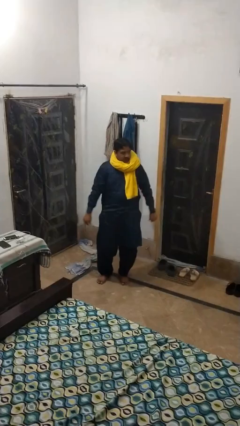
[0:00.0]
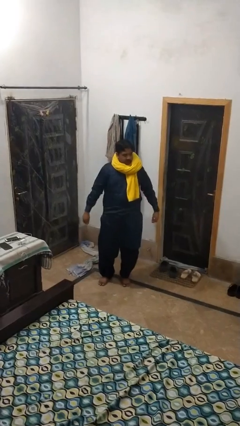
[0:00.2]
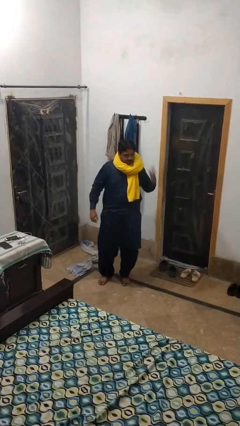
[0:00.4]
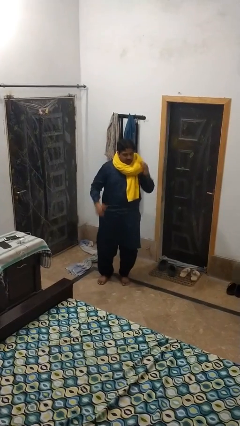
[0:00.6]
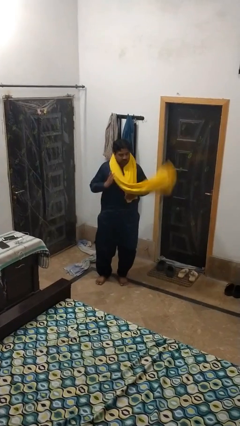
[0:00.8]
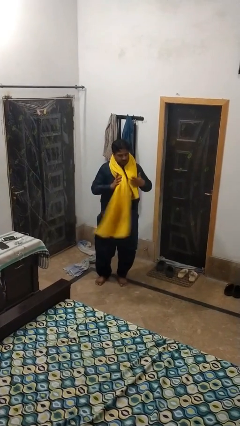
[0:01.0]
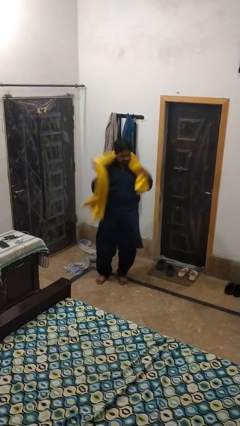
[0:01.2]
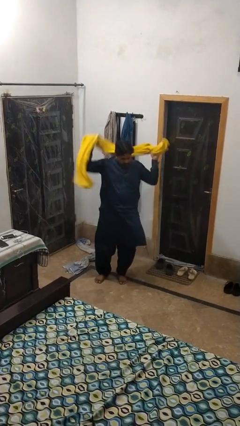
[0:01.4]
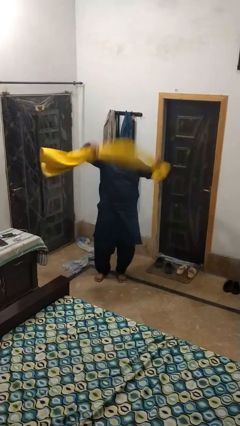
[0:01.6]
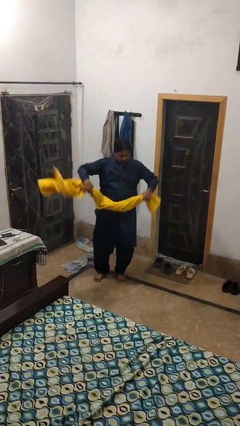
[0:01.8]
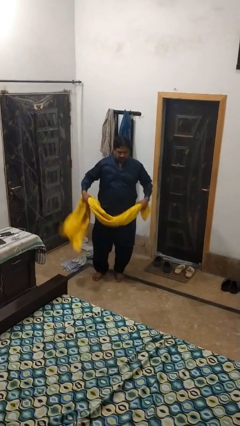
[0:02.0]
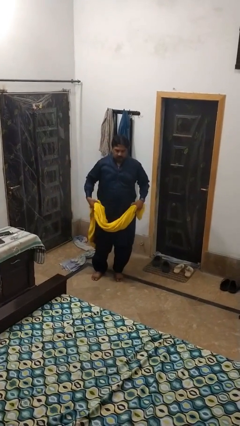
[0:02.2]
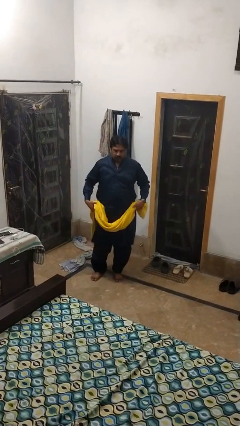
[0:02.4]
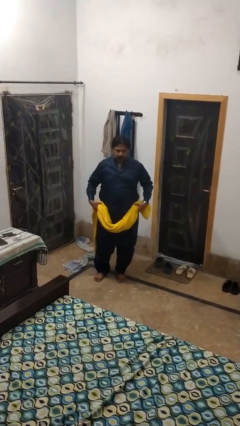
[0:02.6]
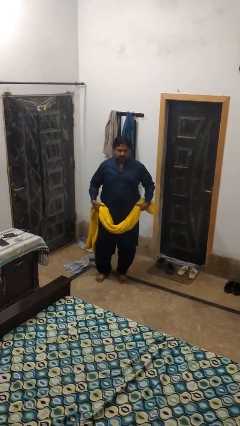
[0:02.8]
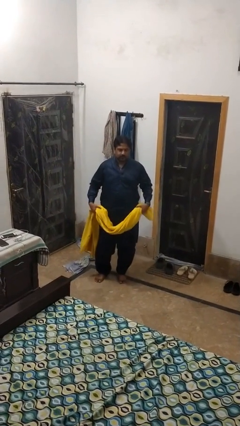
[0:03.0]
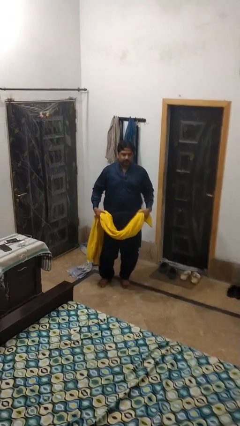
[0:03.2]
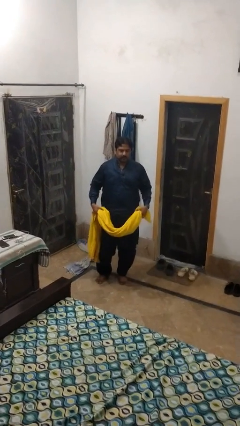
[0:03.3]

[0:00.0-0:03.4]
person takes off scarf

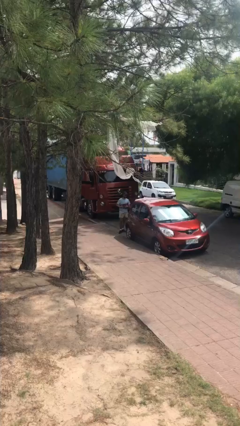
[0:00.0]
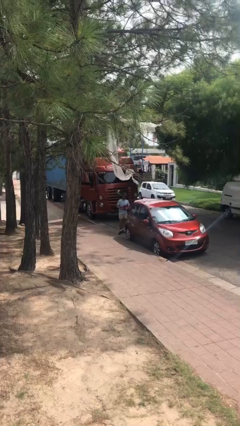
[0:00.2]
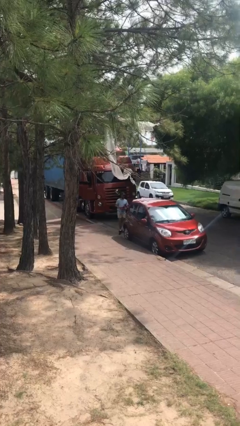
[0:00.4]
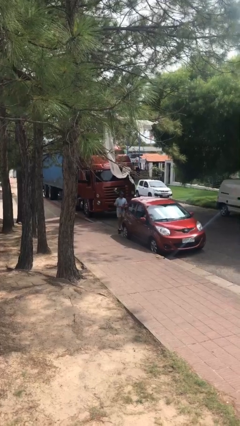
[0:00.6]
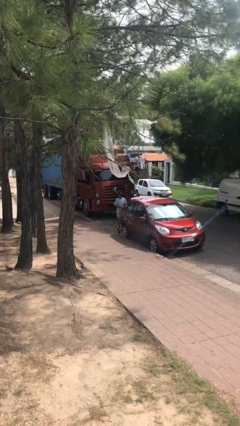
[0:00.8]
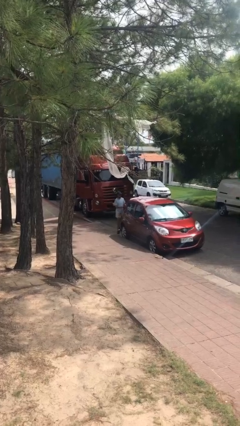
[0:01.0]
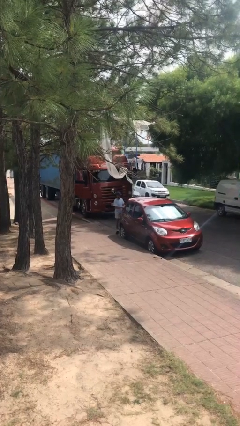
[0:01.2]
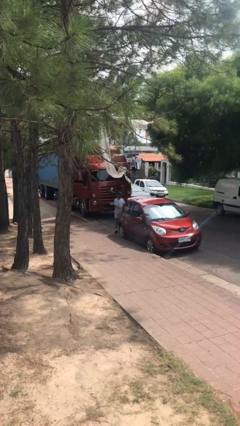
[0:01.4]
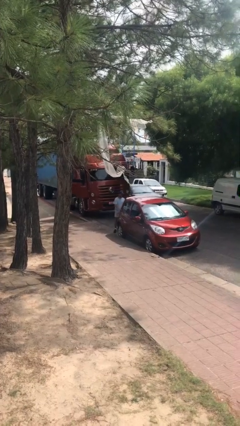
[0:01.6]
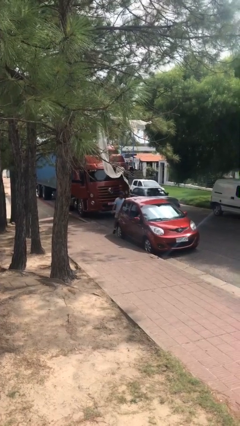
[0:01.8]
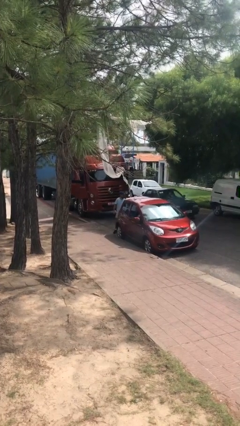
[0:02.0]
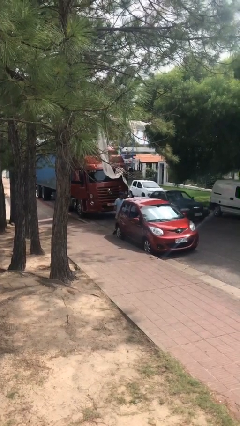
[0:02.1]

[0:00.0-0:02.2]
person loads car

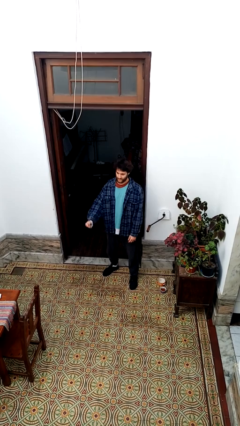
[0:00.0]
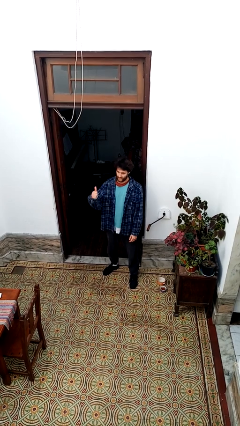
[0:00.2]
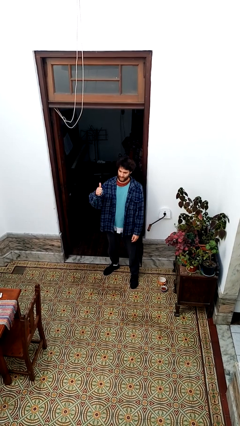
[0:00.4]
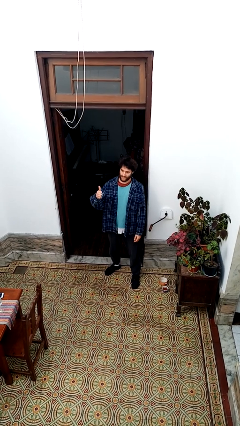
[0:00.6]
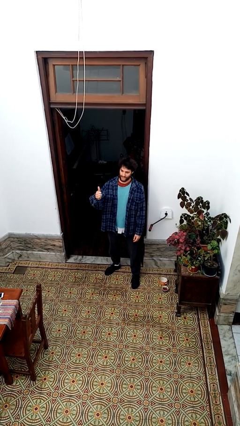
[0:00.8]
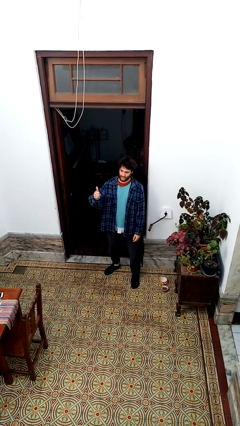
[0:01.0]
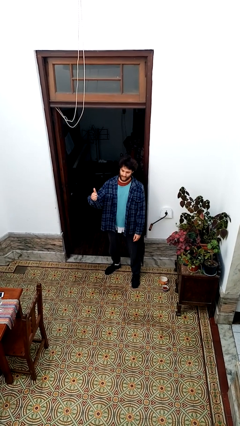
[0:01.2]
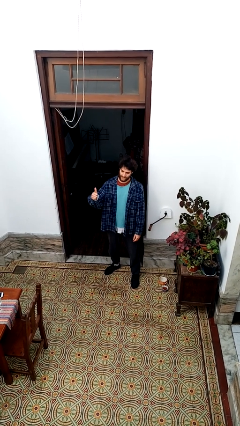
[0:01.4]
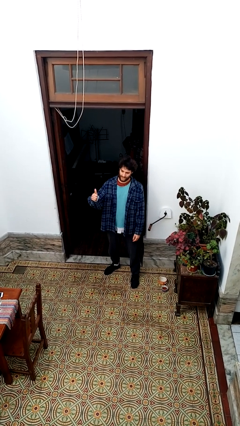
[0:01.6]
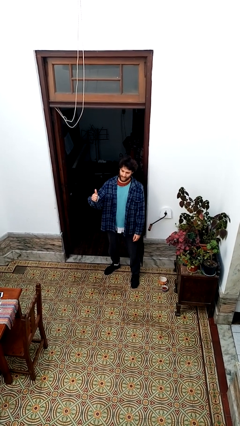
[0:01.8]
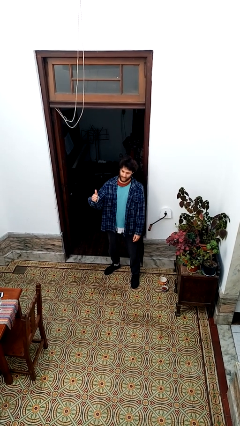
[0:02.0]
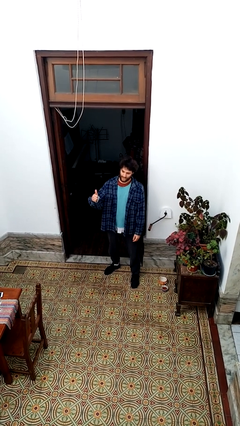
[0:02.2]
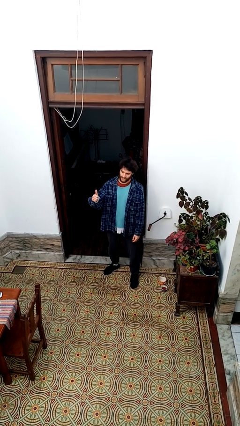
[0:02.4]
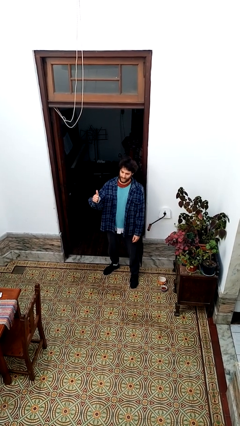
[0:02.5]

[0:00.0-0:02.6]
person gestures thumbs up

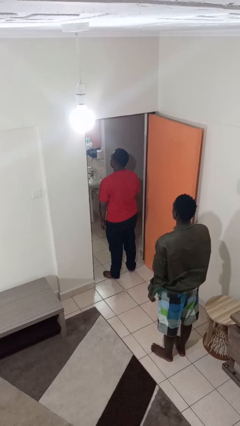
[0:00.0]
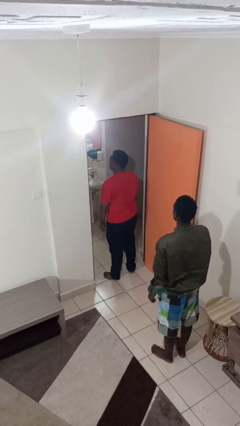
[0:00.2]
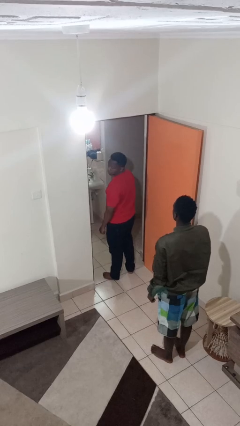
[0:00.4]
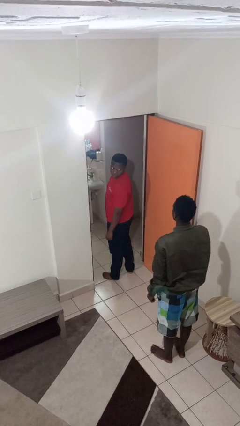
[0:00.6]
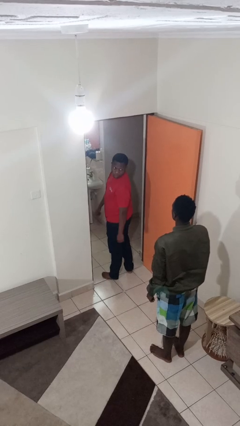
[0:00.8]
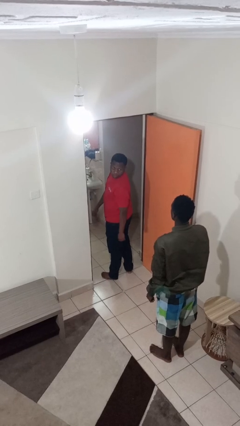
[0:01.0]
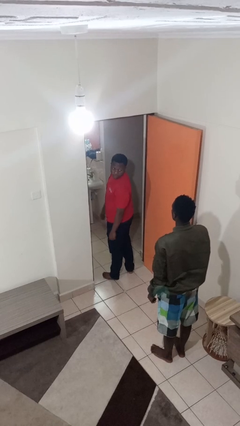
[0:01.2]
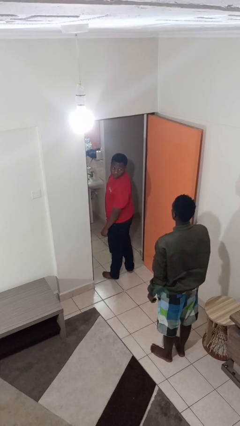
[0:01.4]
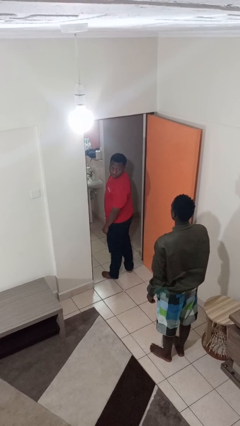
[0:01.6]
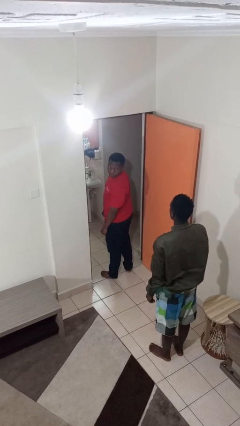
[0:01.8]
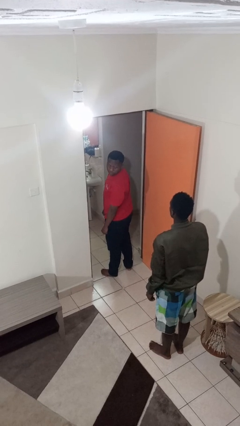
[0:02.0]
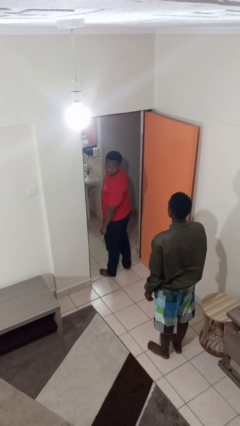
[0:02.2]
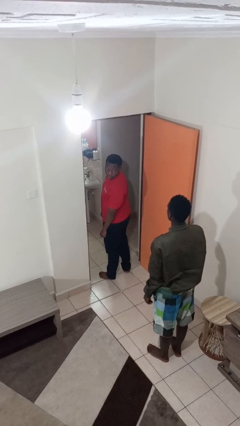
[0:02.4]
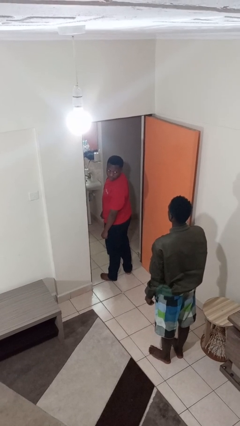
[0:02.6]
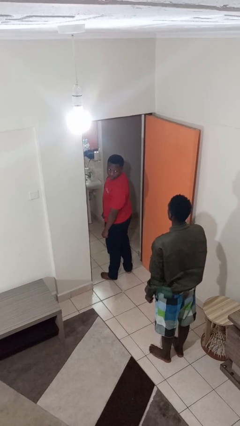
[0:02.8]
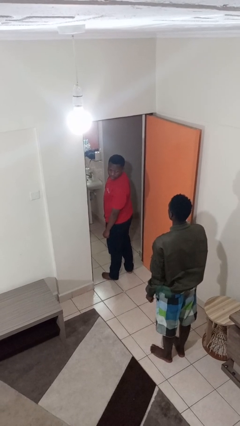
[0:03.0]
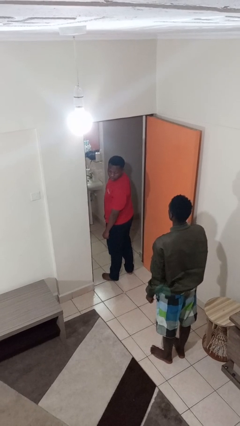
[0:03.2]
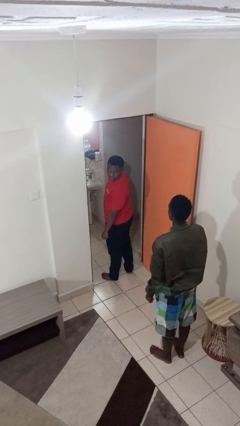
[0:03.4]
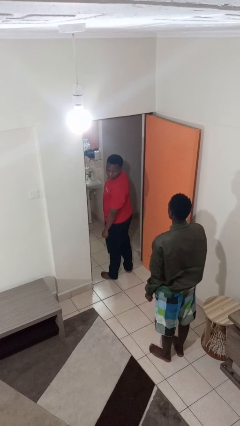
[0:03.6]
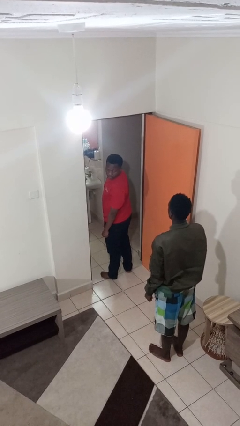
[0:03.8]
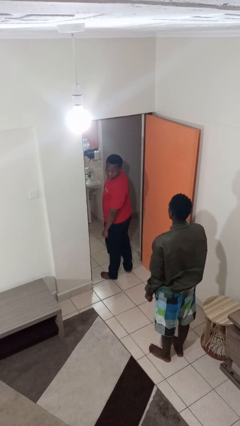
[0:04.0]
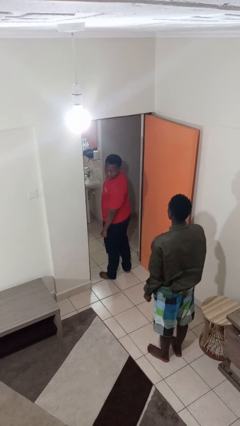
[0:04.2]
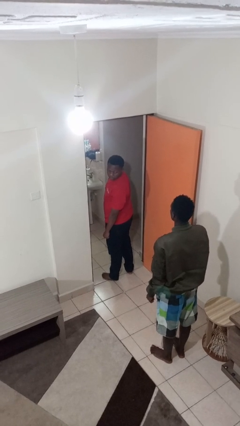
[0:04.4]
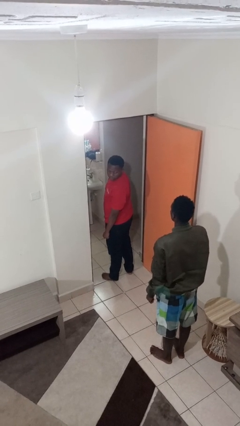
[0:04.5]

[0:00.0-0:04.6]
person looks over shoulder

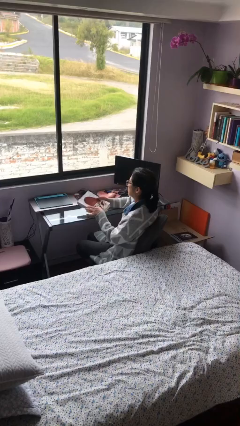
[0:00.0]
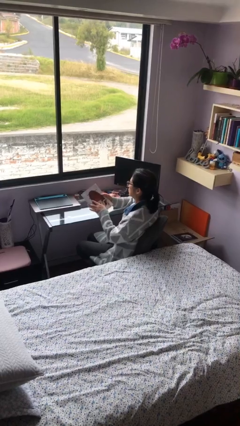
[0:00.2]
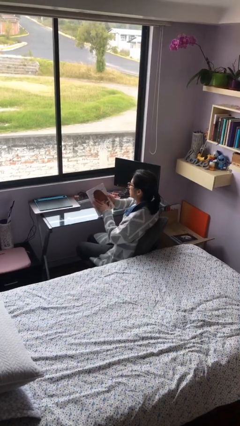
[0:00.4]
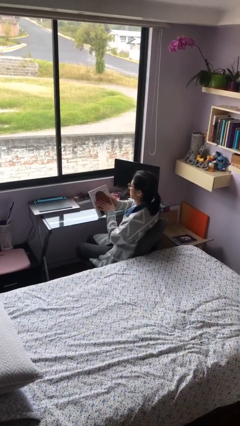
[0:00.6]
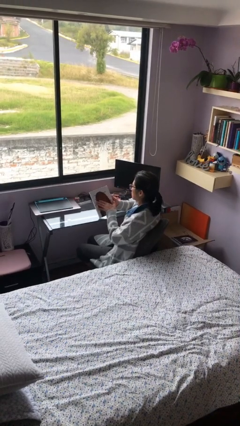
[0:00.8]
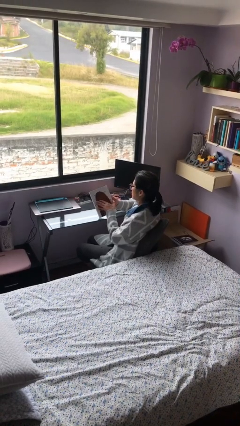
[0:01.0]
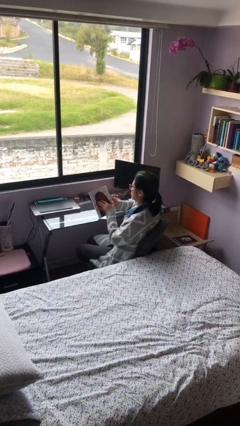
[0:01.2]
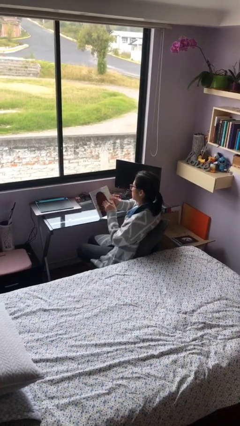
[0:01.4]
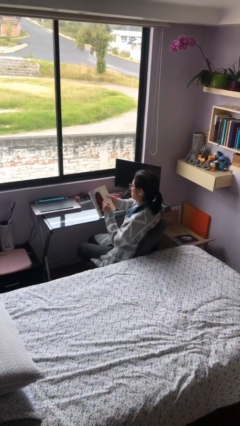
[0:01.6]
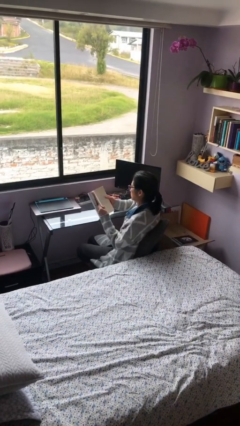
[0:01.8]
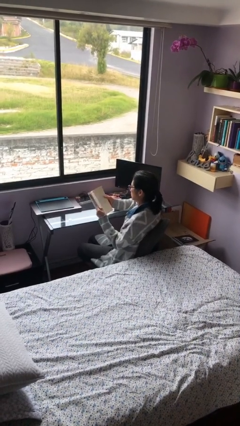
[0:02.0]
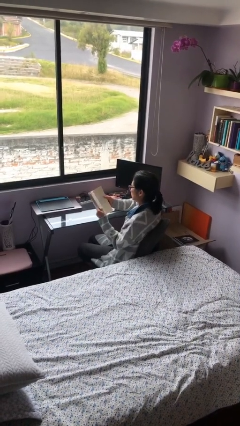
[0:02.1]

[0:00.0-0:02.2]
person picks up object from table

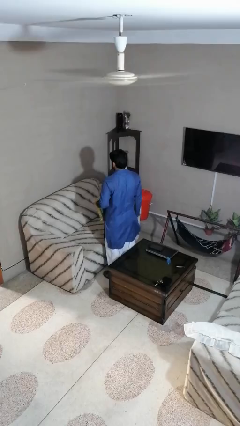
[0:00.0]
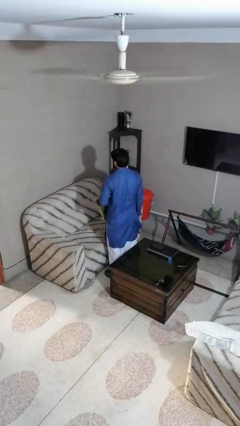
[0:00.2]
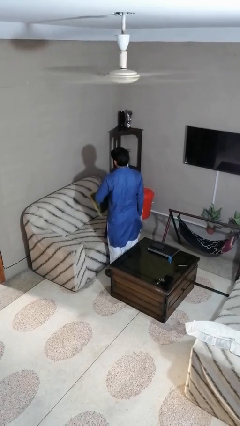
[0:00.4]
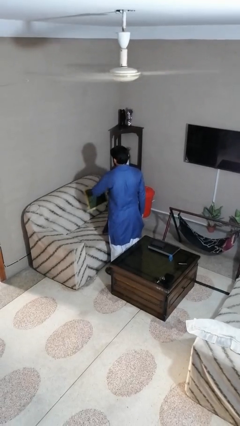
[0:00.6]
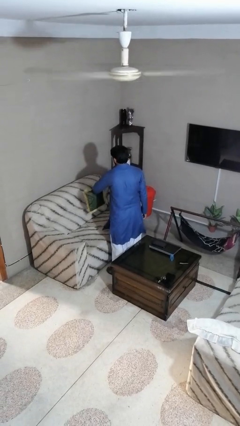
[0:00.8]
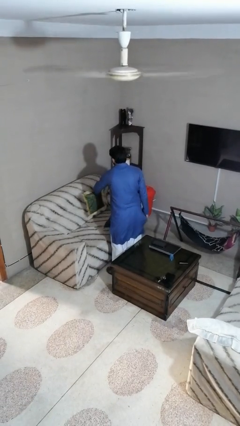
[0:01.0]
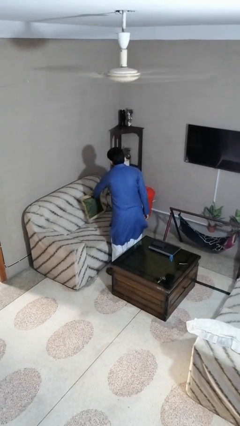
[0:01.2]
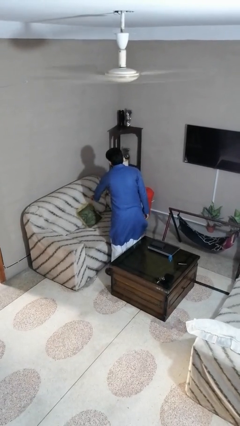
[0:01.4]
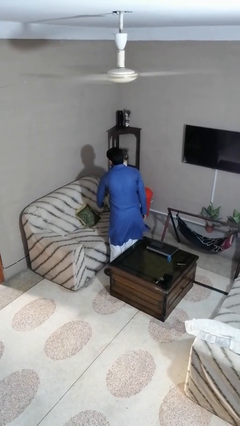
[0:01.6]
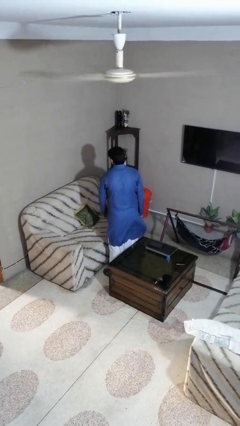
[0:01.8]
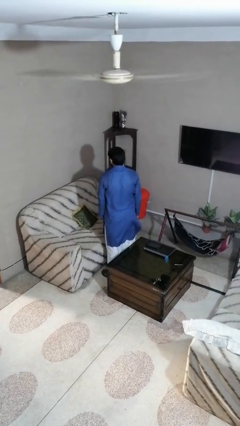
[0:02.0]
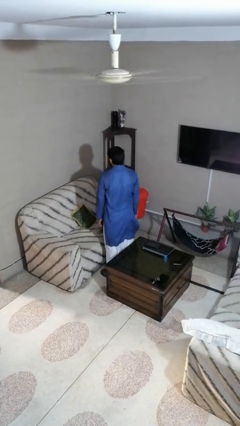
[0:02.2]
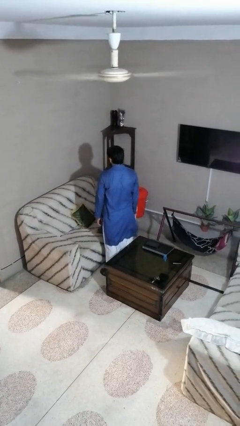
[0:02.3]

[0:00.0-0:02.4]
person puts down object on couch

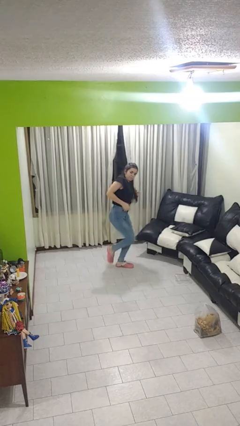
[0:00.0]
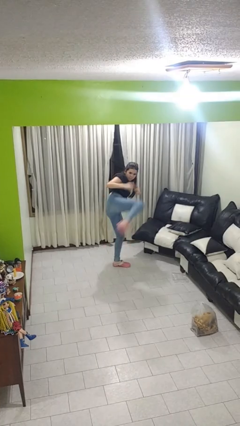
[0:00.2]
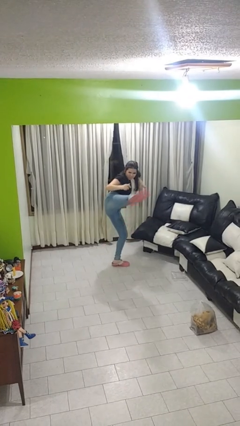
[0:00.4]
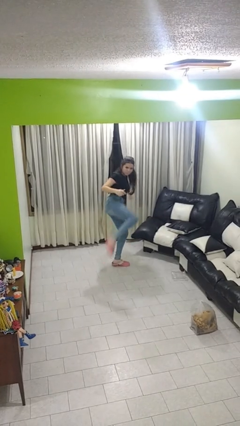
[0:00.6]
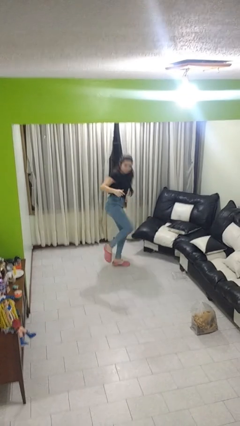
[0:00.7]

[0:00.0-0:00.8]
person karate kicks
